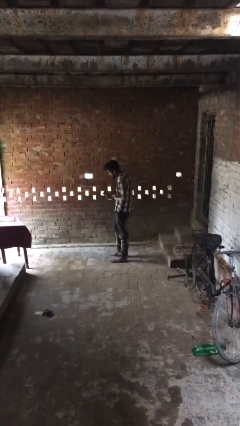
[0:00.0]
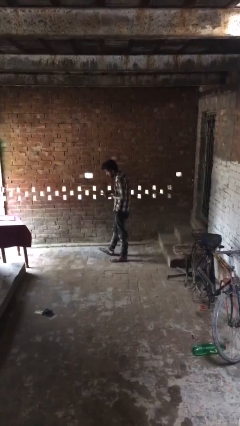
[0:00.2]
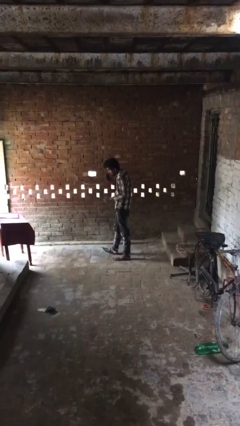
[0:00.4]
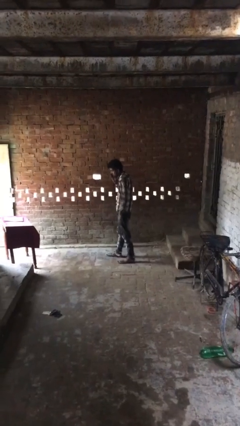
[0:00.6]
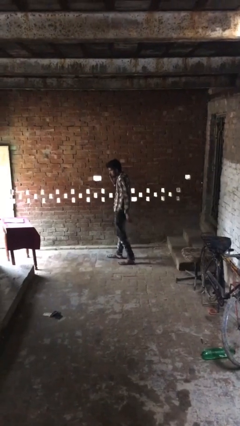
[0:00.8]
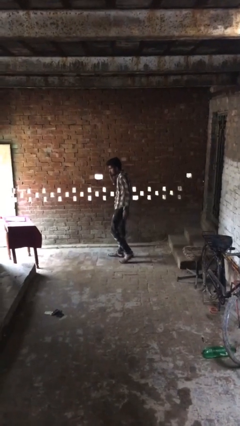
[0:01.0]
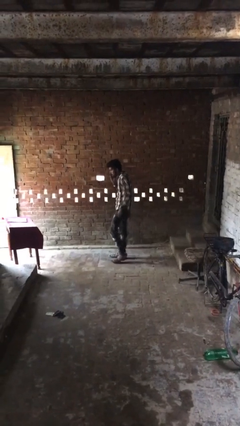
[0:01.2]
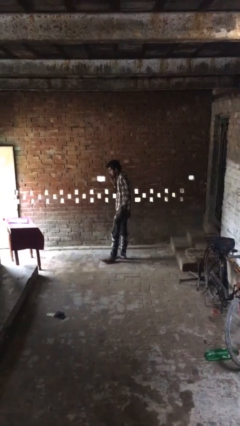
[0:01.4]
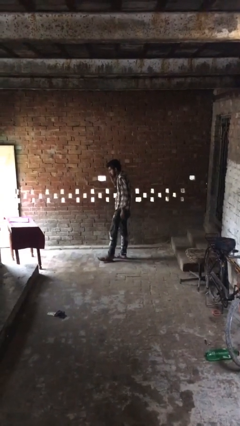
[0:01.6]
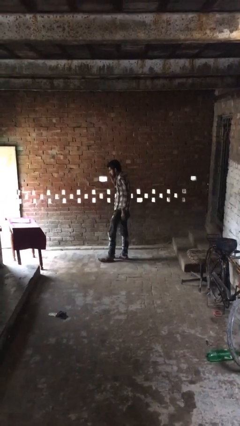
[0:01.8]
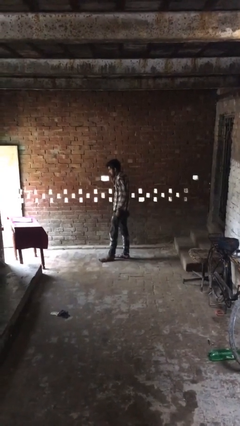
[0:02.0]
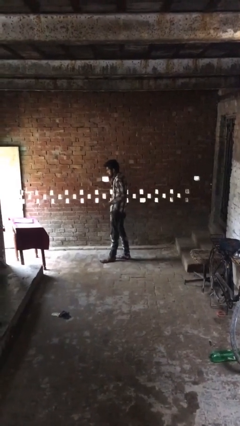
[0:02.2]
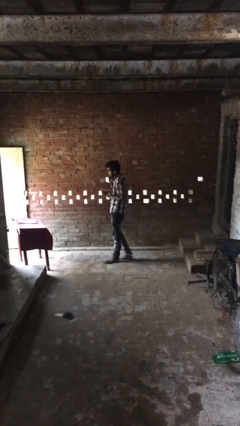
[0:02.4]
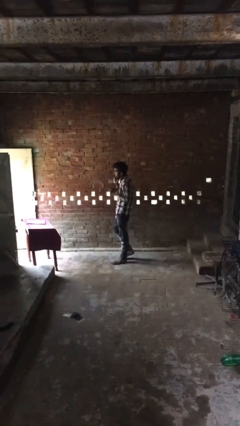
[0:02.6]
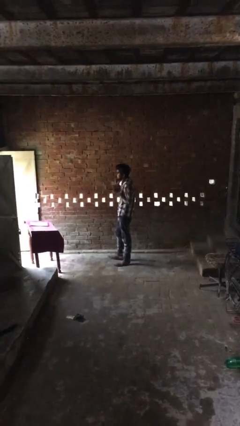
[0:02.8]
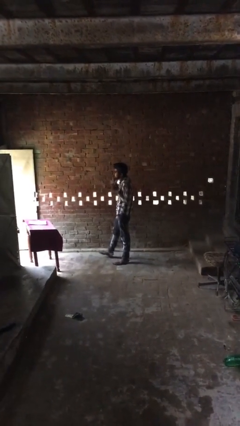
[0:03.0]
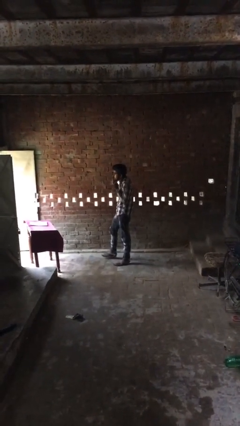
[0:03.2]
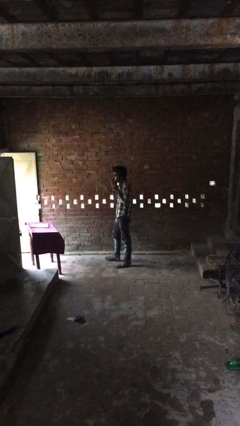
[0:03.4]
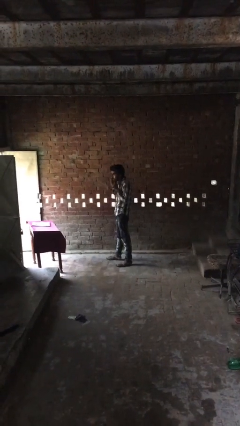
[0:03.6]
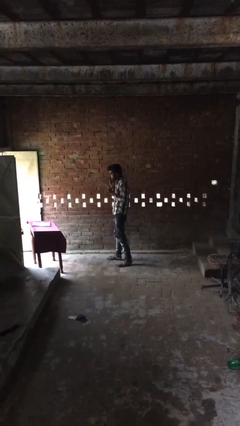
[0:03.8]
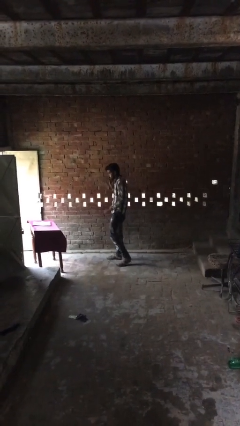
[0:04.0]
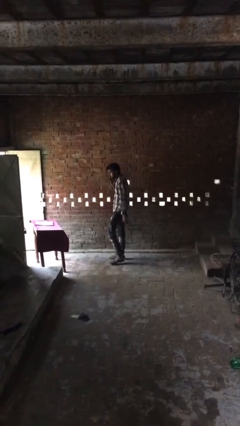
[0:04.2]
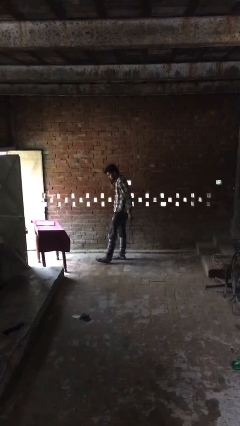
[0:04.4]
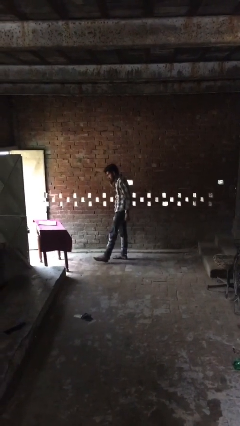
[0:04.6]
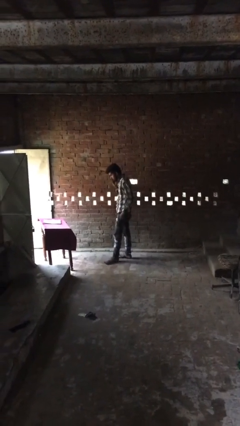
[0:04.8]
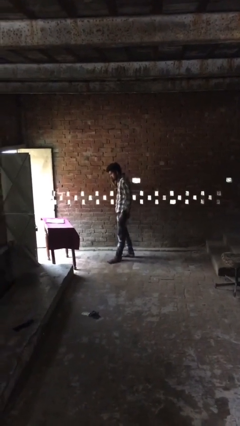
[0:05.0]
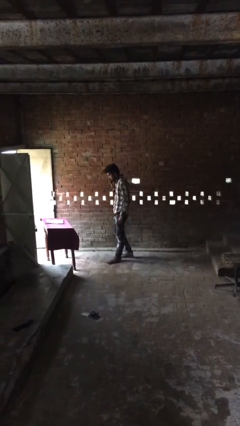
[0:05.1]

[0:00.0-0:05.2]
person talks on phone

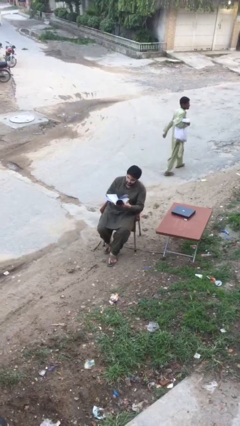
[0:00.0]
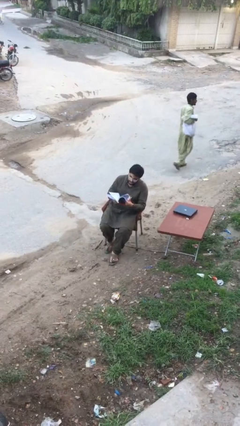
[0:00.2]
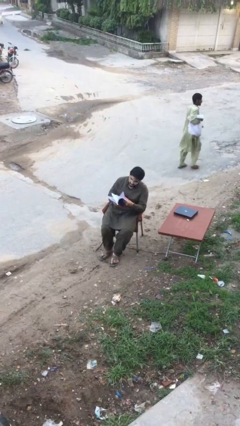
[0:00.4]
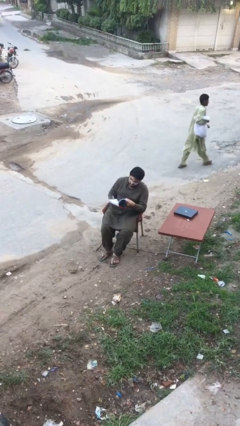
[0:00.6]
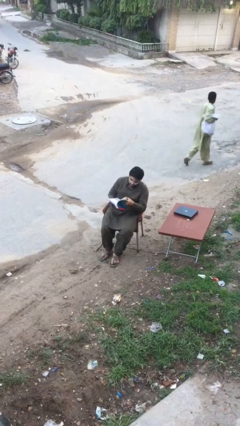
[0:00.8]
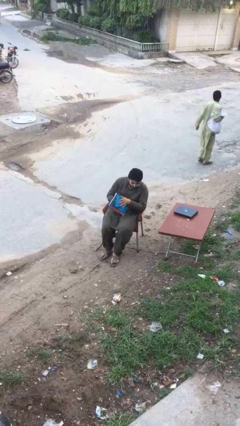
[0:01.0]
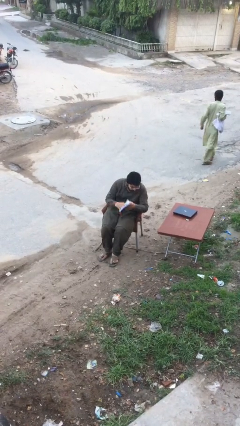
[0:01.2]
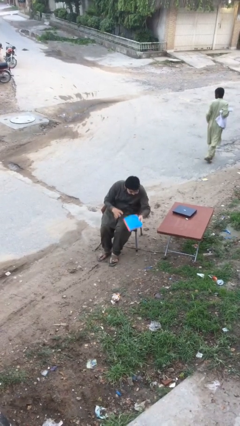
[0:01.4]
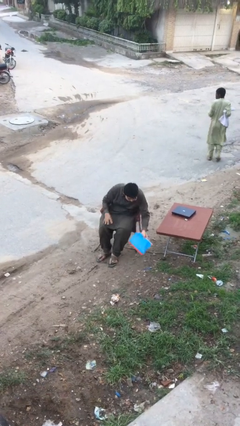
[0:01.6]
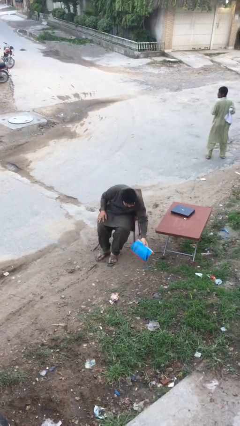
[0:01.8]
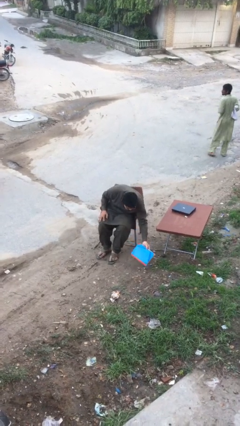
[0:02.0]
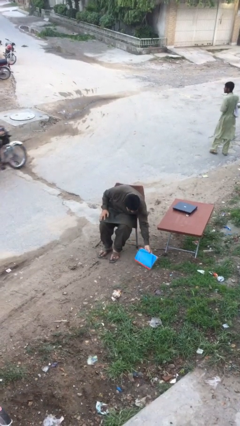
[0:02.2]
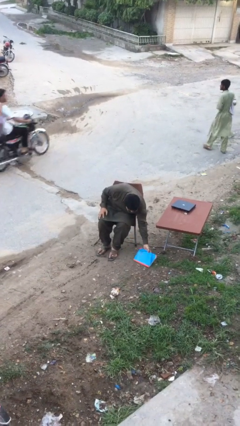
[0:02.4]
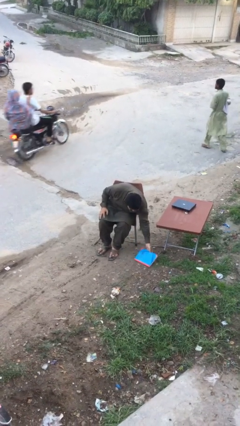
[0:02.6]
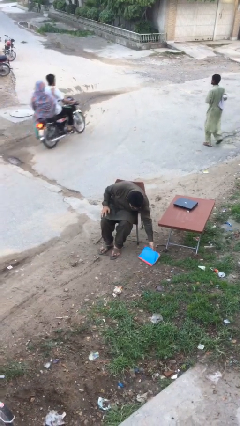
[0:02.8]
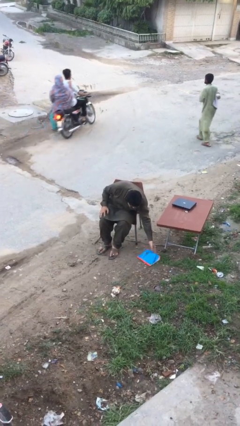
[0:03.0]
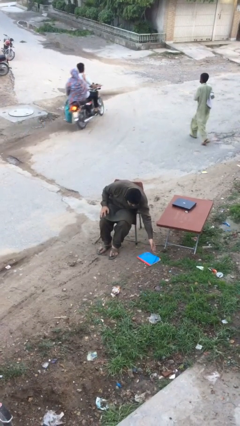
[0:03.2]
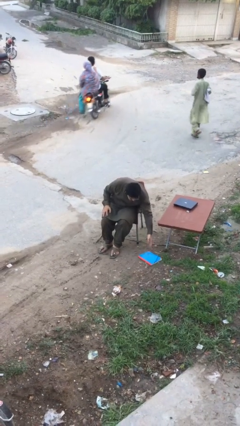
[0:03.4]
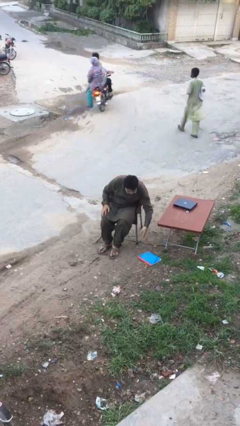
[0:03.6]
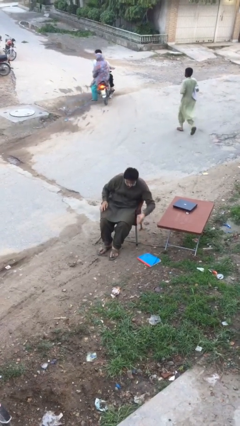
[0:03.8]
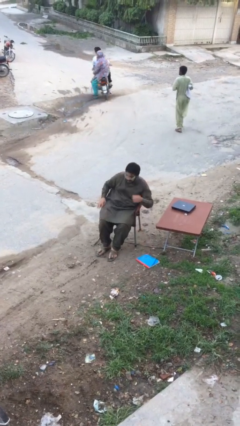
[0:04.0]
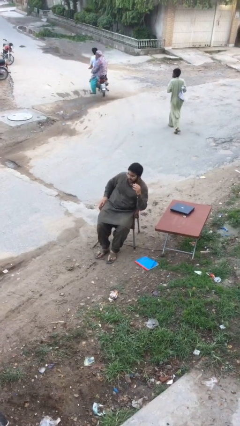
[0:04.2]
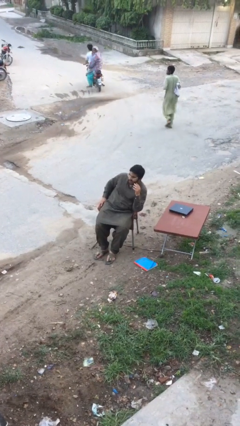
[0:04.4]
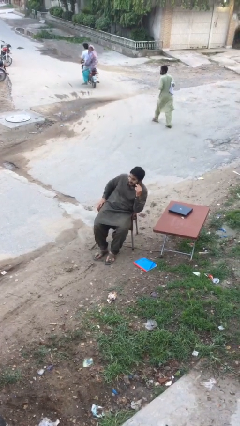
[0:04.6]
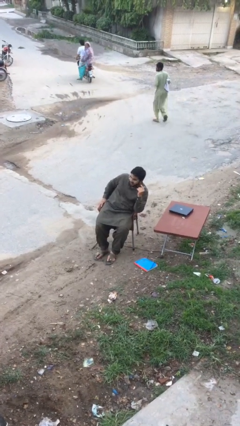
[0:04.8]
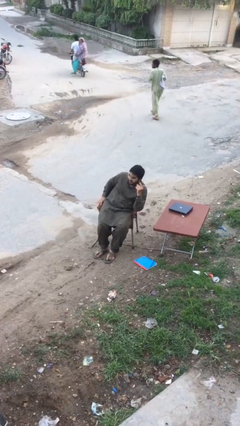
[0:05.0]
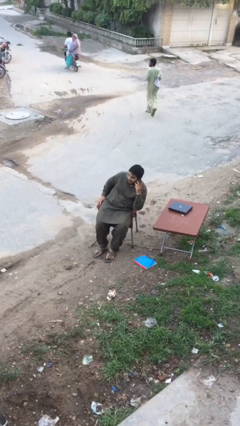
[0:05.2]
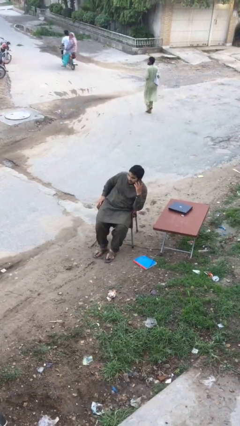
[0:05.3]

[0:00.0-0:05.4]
person puts down object on floor

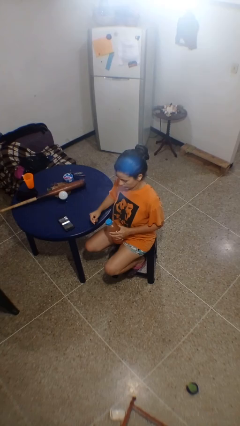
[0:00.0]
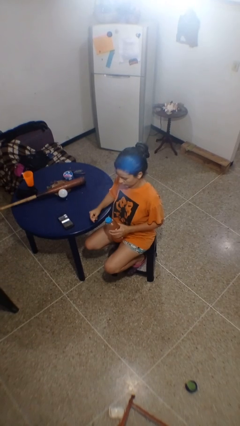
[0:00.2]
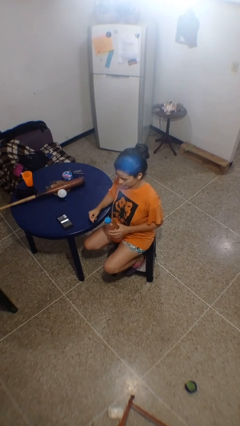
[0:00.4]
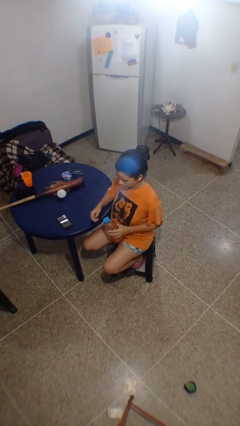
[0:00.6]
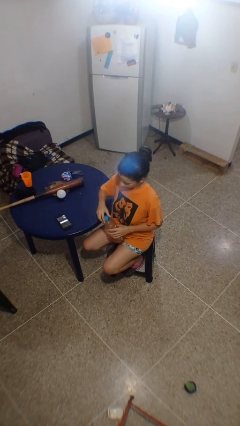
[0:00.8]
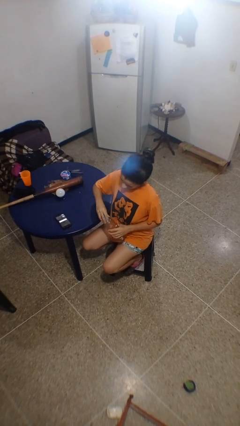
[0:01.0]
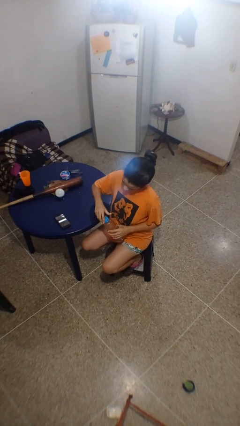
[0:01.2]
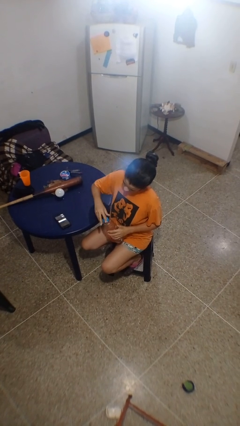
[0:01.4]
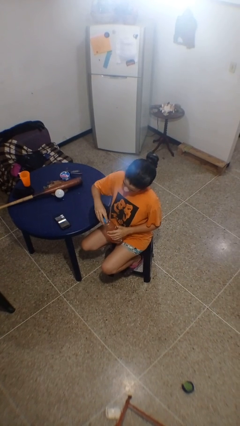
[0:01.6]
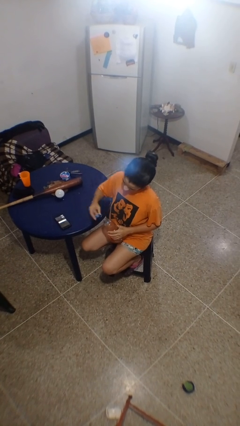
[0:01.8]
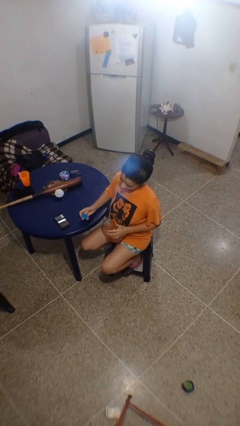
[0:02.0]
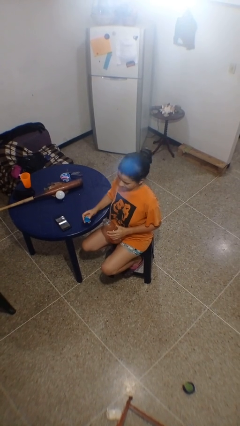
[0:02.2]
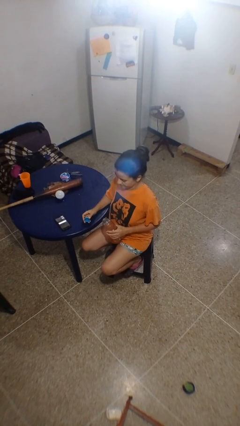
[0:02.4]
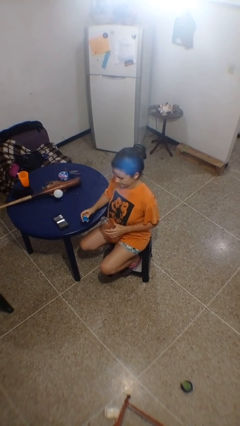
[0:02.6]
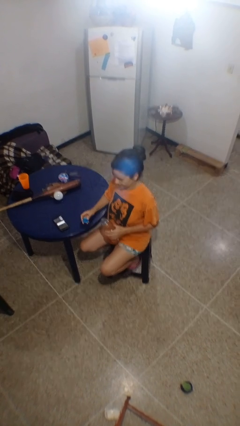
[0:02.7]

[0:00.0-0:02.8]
person unscrews lid from bottle

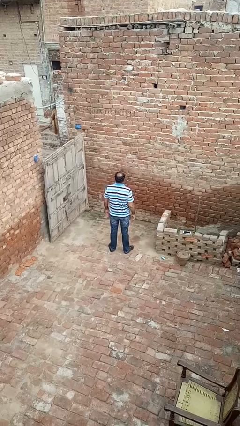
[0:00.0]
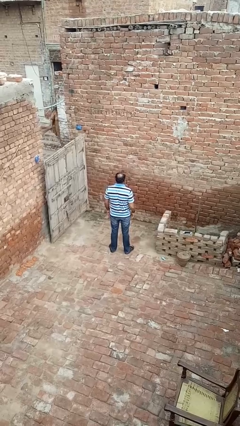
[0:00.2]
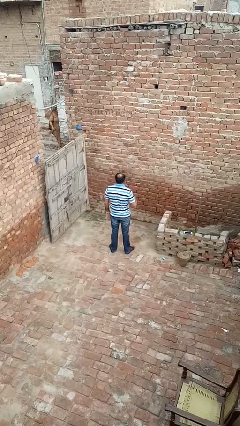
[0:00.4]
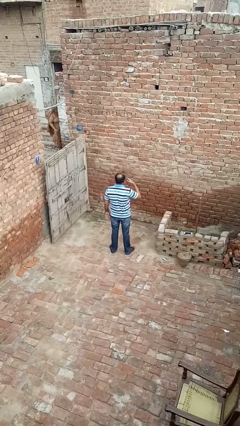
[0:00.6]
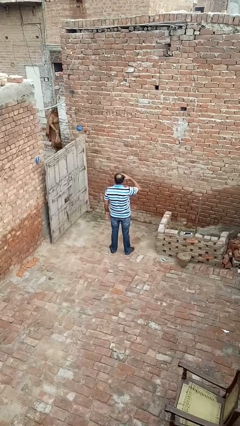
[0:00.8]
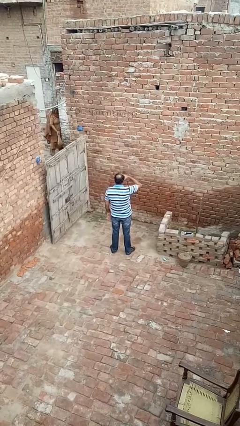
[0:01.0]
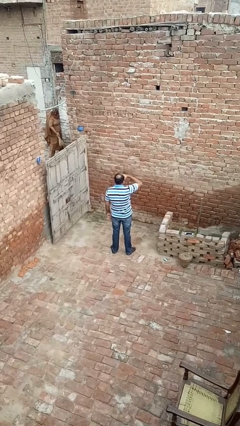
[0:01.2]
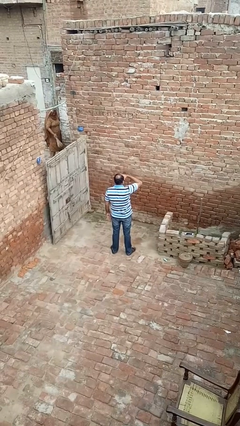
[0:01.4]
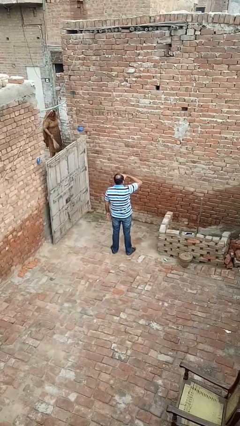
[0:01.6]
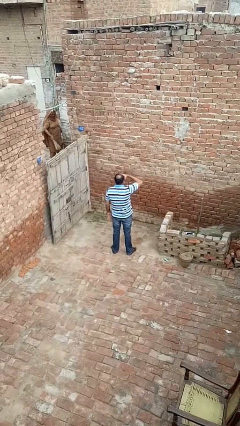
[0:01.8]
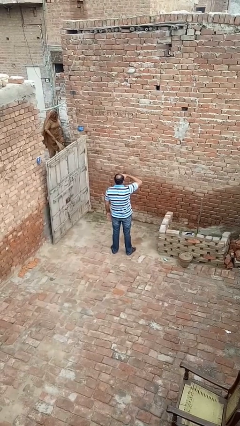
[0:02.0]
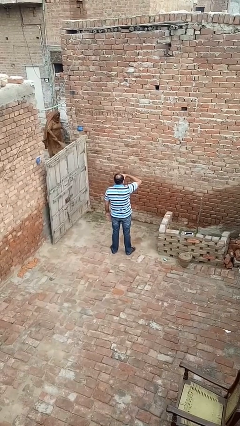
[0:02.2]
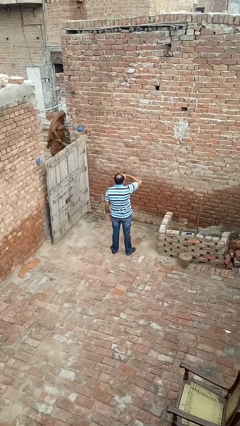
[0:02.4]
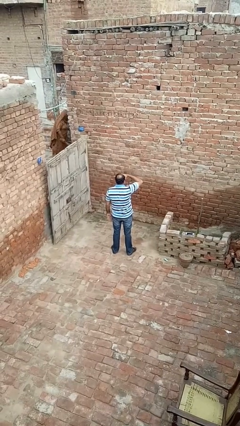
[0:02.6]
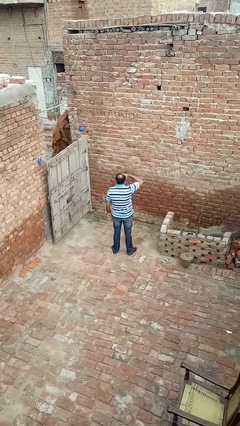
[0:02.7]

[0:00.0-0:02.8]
person shades eyes

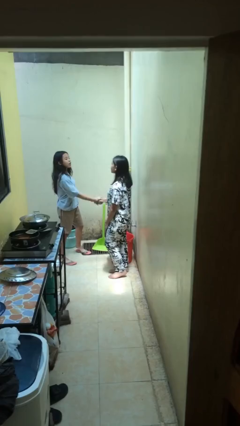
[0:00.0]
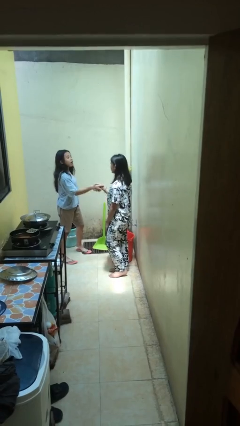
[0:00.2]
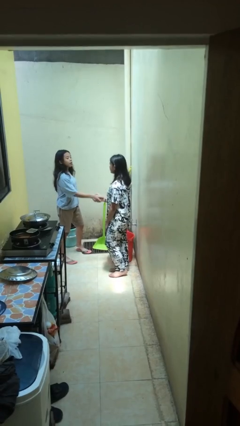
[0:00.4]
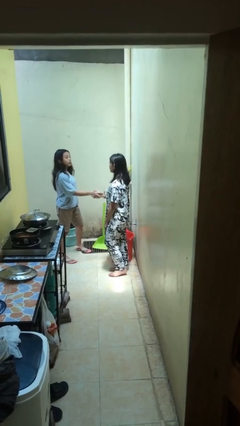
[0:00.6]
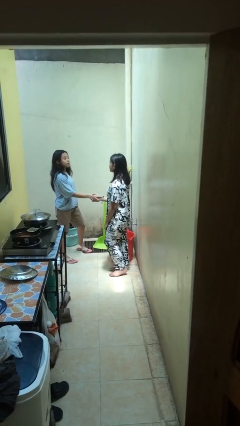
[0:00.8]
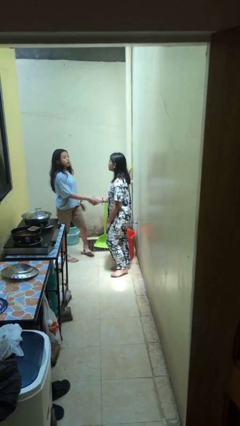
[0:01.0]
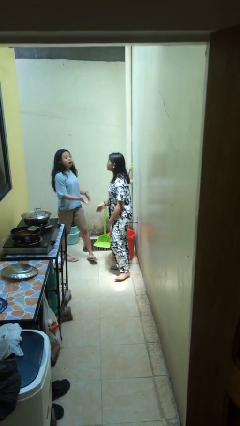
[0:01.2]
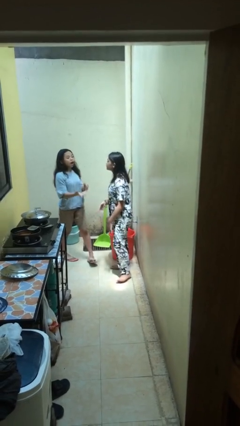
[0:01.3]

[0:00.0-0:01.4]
person shakes hand
